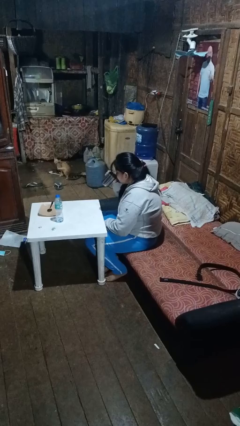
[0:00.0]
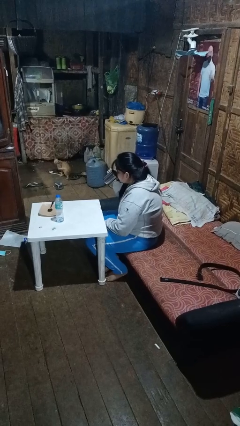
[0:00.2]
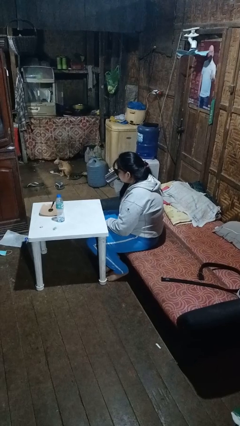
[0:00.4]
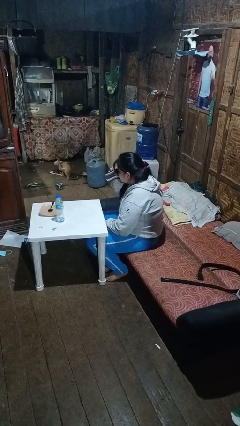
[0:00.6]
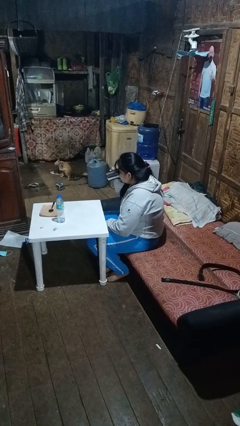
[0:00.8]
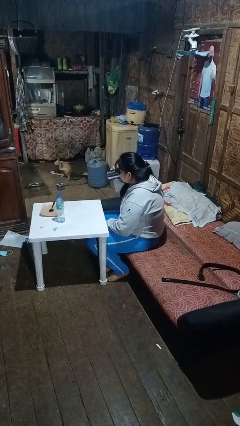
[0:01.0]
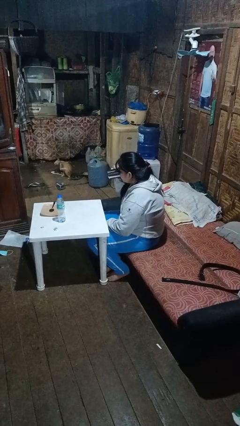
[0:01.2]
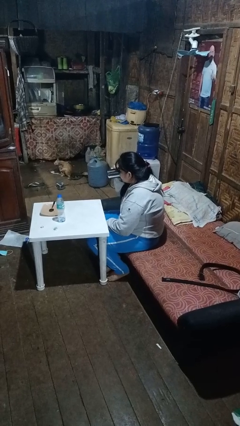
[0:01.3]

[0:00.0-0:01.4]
person drinks from mug

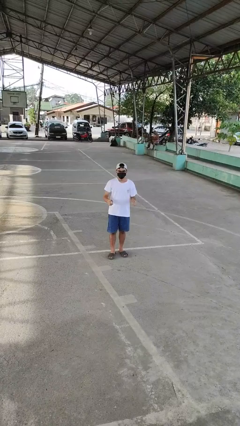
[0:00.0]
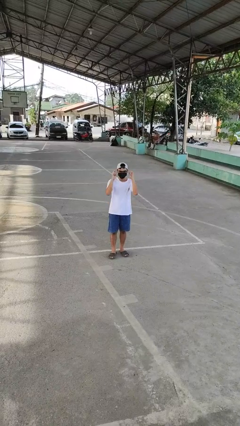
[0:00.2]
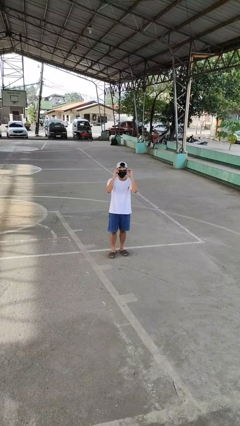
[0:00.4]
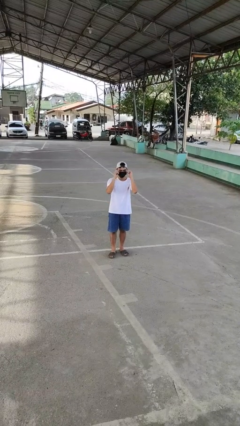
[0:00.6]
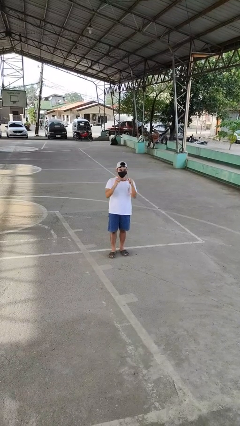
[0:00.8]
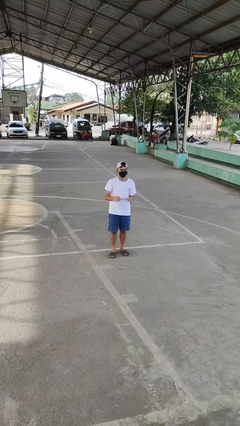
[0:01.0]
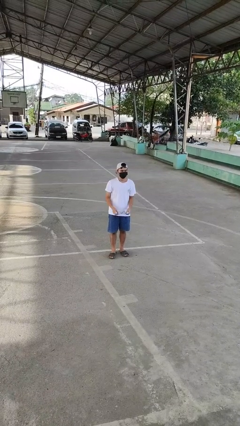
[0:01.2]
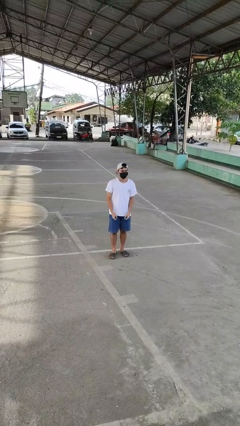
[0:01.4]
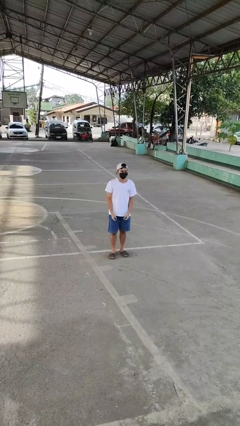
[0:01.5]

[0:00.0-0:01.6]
person takes off glasses

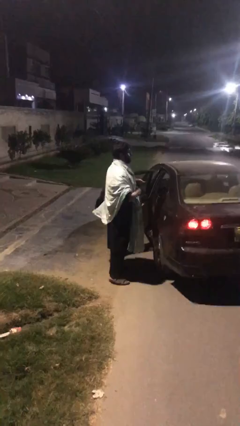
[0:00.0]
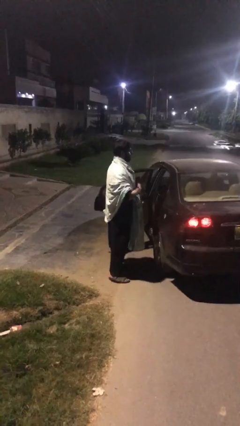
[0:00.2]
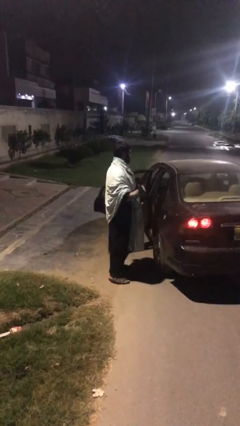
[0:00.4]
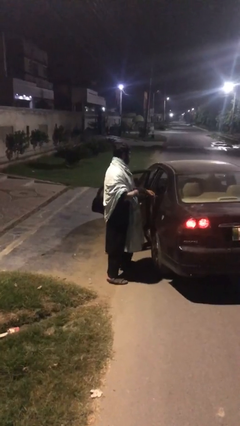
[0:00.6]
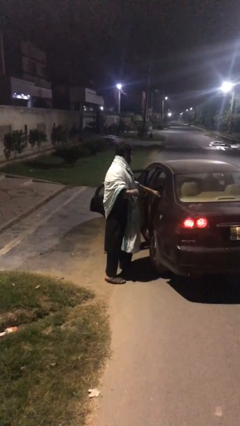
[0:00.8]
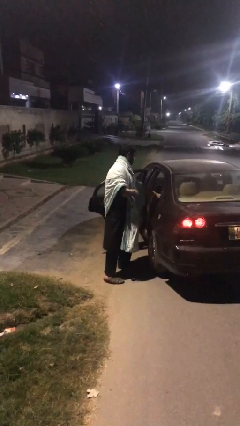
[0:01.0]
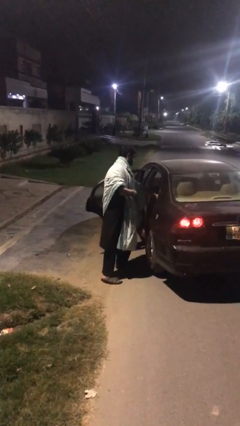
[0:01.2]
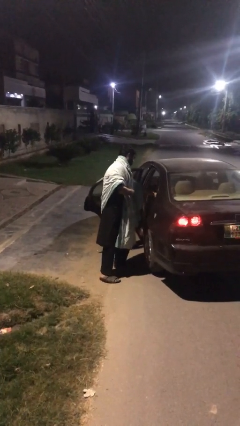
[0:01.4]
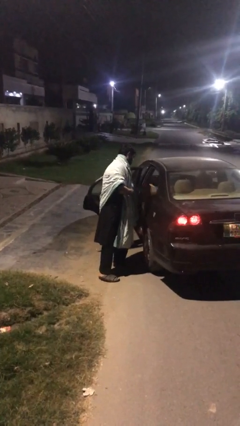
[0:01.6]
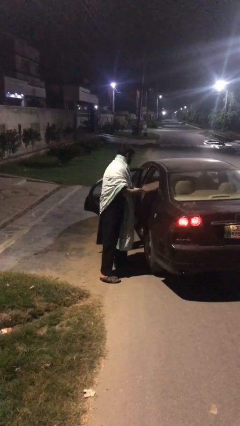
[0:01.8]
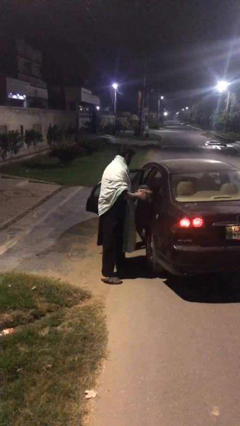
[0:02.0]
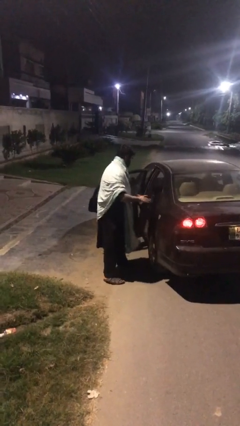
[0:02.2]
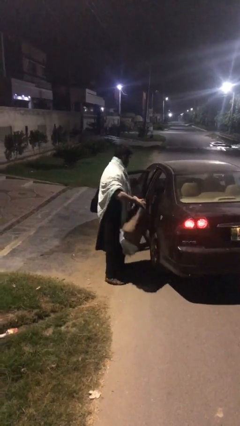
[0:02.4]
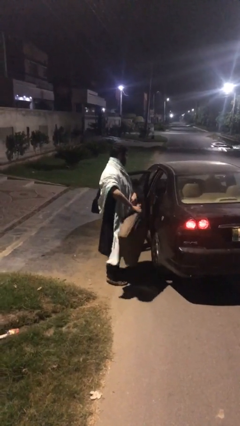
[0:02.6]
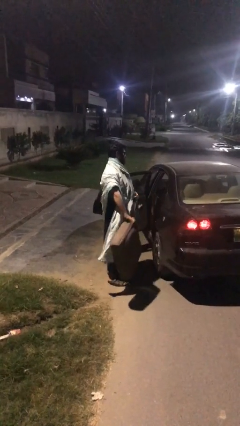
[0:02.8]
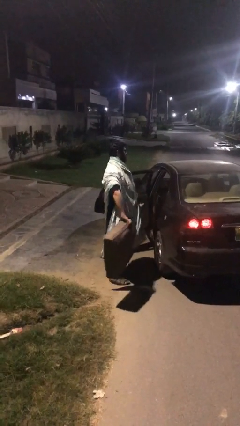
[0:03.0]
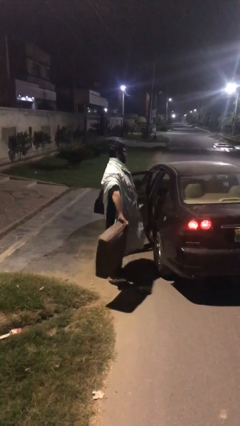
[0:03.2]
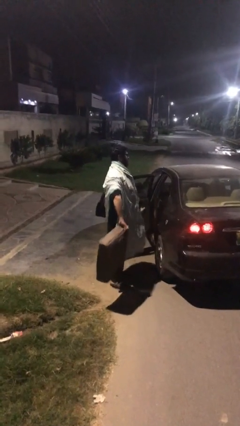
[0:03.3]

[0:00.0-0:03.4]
person unloads car

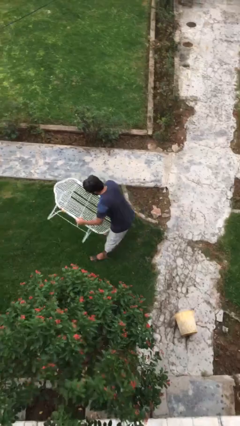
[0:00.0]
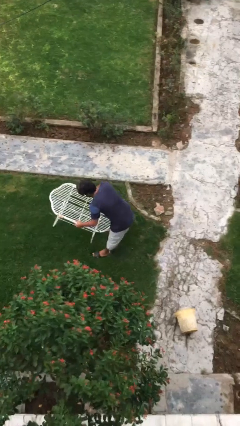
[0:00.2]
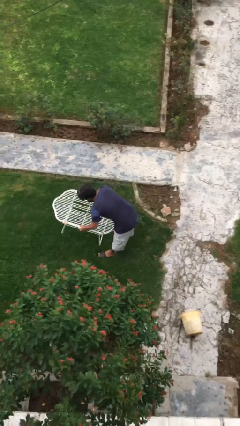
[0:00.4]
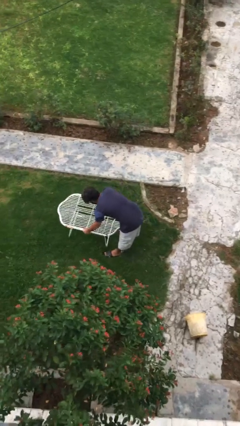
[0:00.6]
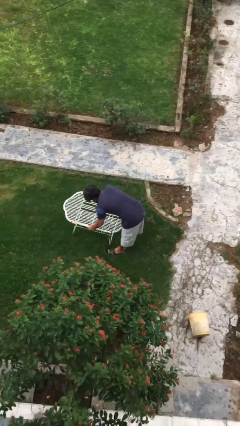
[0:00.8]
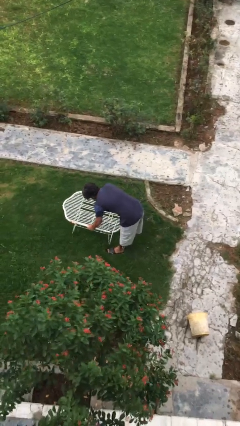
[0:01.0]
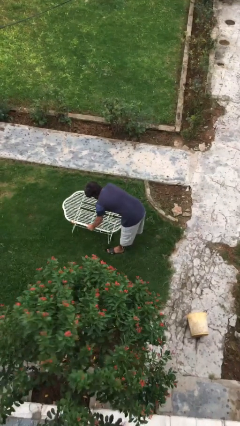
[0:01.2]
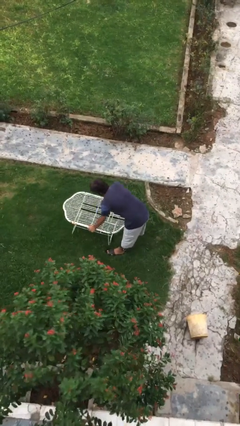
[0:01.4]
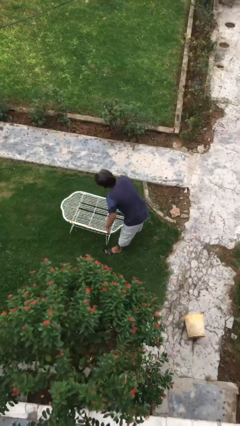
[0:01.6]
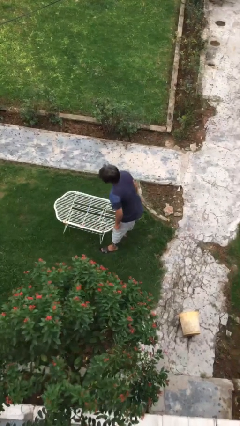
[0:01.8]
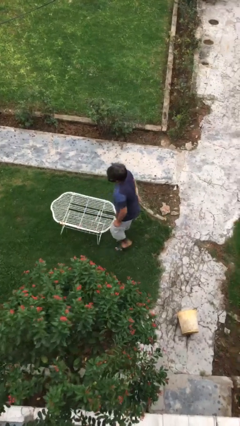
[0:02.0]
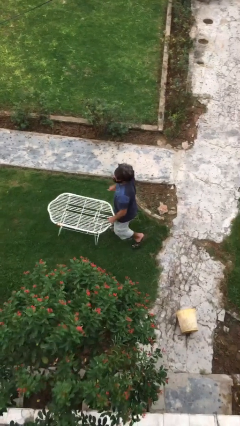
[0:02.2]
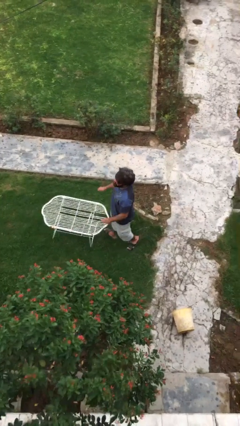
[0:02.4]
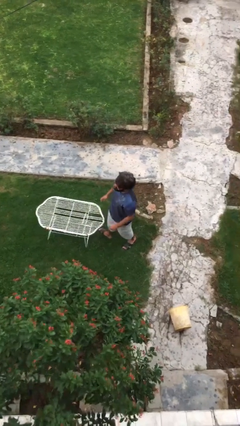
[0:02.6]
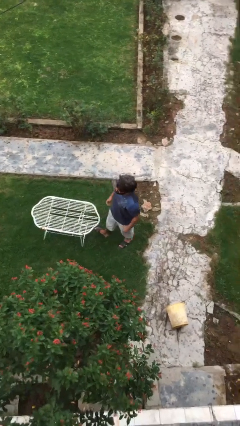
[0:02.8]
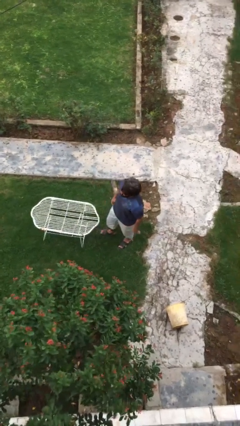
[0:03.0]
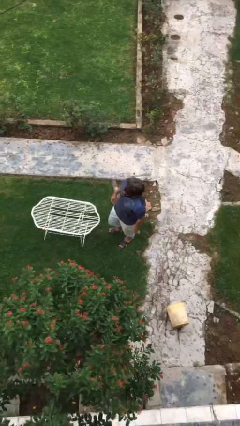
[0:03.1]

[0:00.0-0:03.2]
person puts down object on floor

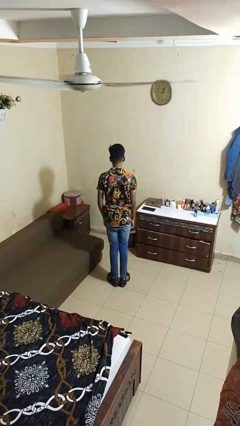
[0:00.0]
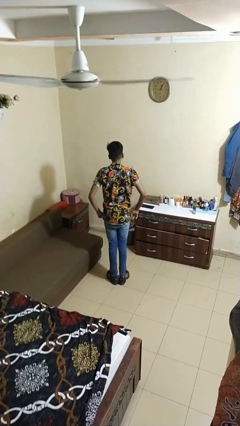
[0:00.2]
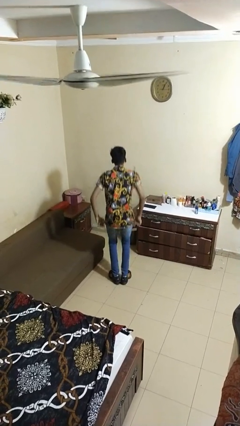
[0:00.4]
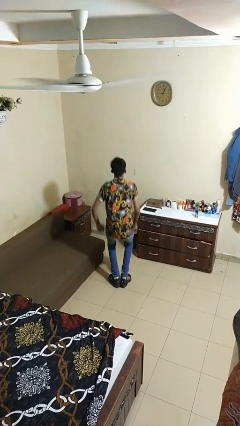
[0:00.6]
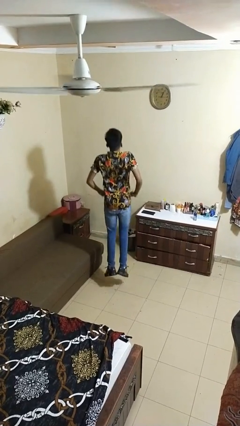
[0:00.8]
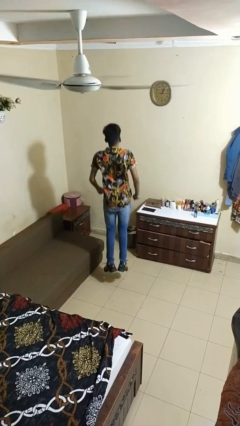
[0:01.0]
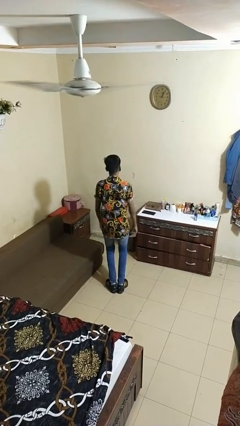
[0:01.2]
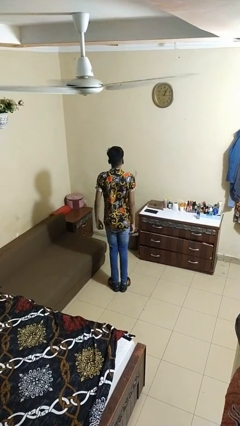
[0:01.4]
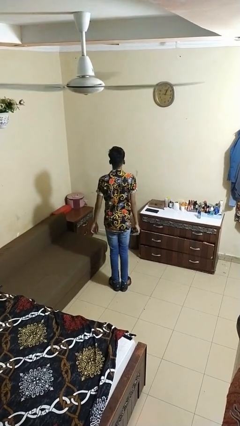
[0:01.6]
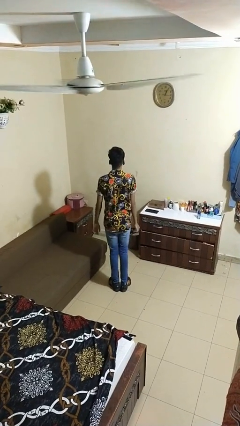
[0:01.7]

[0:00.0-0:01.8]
person jumps

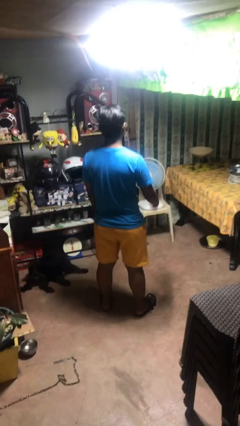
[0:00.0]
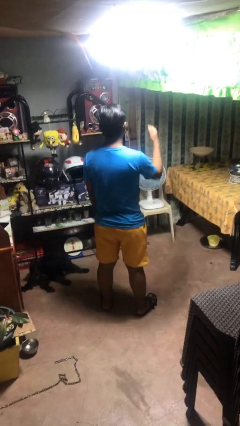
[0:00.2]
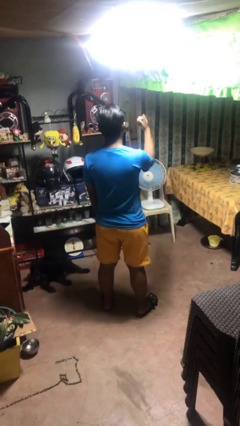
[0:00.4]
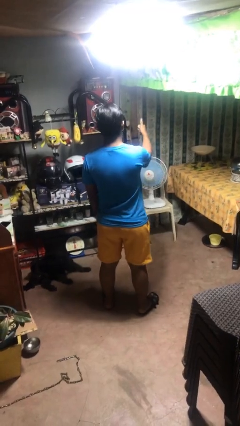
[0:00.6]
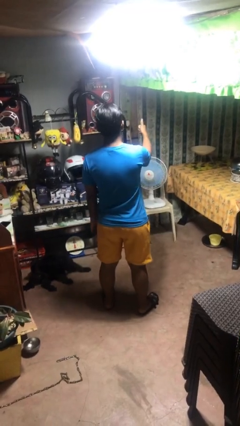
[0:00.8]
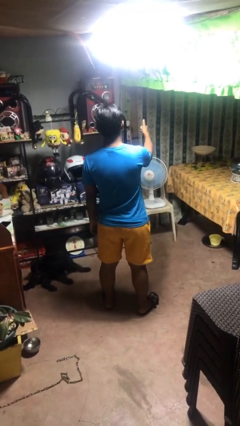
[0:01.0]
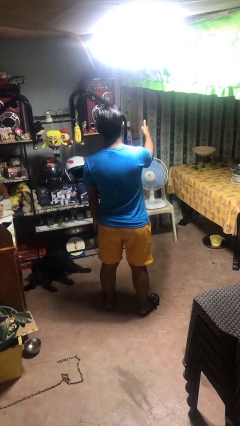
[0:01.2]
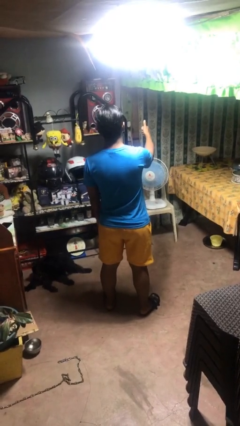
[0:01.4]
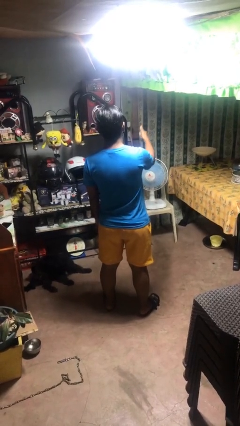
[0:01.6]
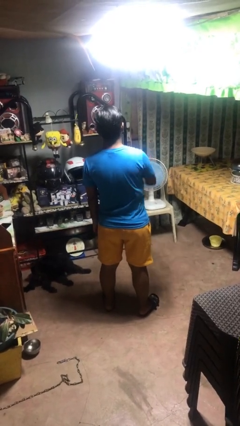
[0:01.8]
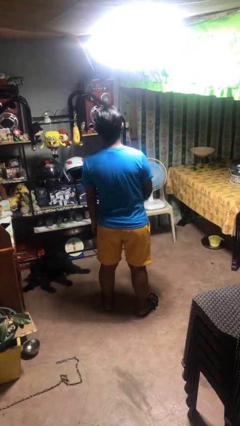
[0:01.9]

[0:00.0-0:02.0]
person gestures thumbs up

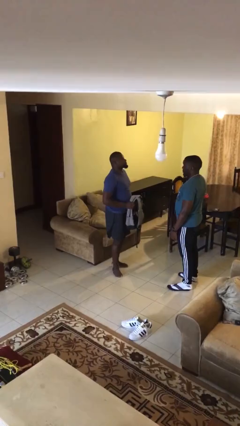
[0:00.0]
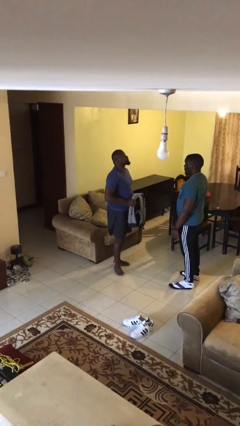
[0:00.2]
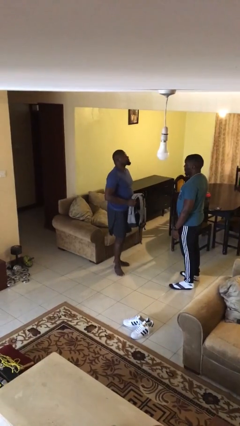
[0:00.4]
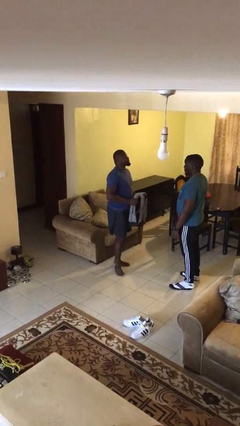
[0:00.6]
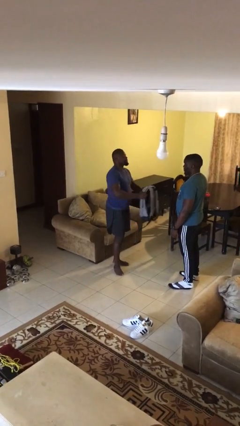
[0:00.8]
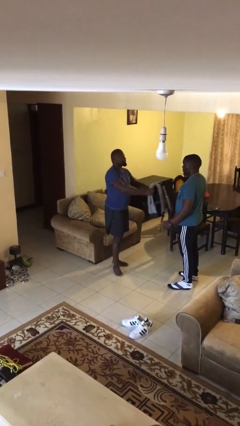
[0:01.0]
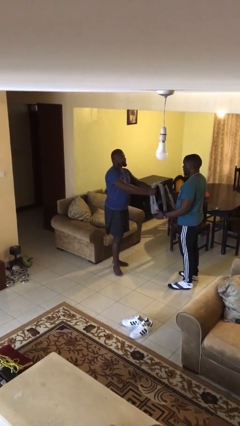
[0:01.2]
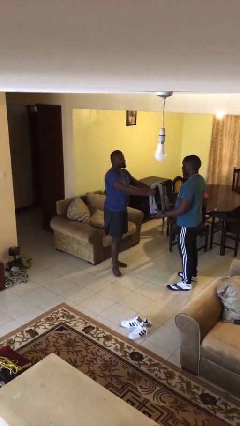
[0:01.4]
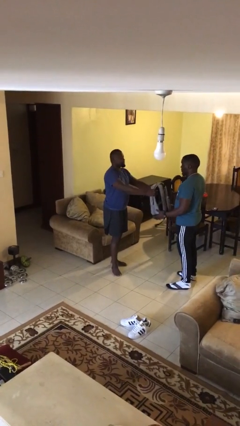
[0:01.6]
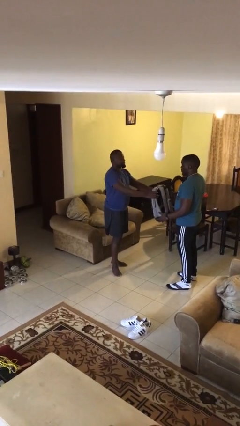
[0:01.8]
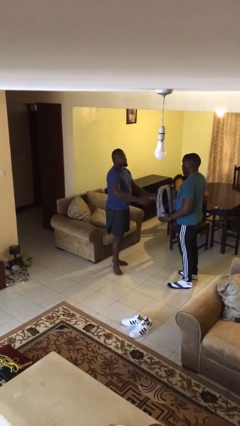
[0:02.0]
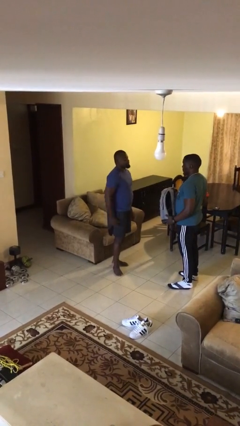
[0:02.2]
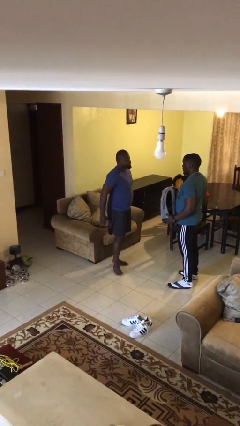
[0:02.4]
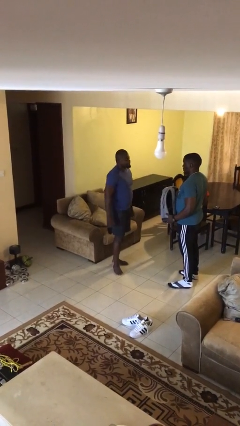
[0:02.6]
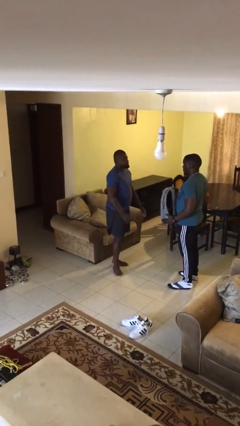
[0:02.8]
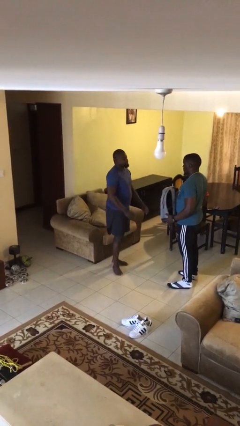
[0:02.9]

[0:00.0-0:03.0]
person transfers object to person

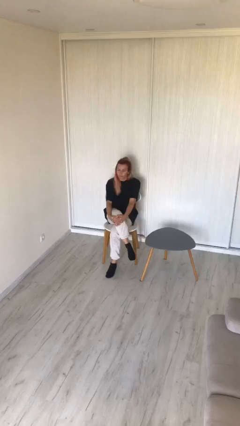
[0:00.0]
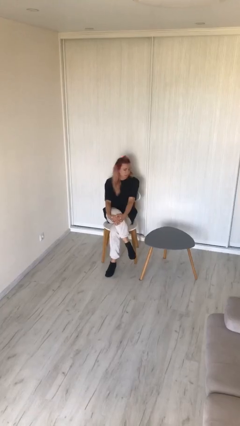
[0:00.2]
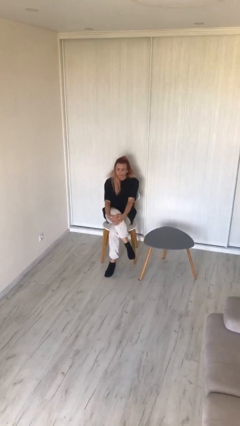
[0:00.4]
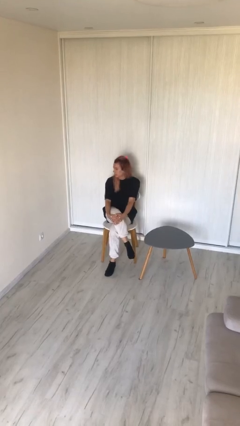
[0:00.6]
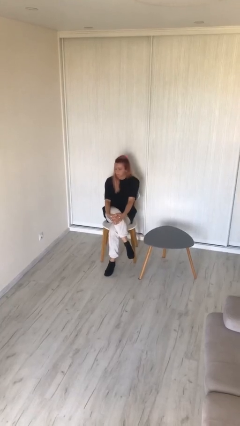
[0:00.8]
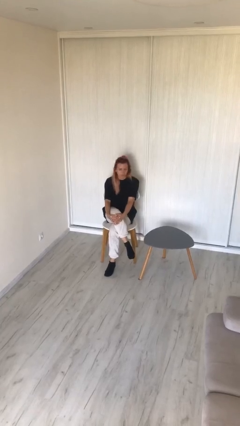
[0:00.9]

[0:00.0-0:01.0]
person shakes head
